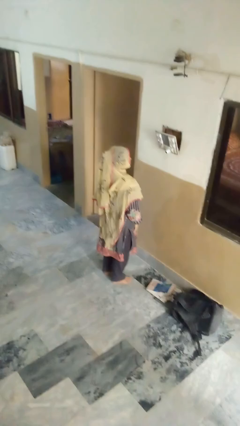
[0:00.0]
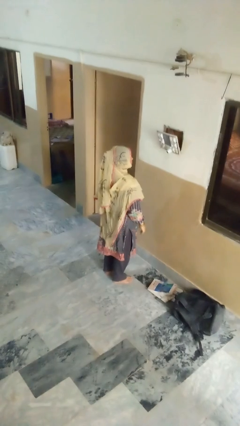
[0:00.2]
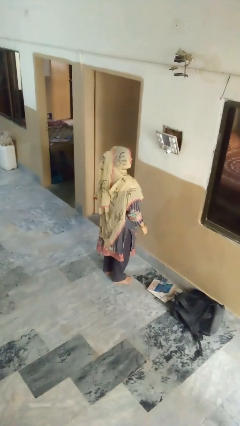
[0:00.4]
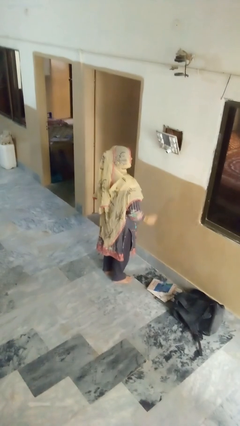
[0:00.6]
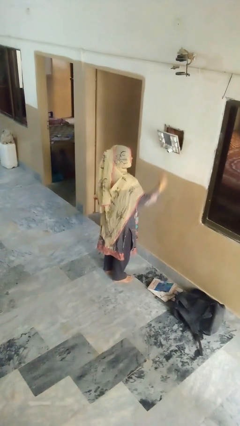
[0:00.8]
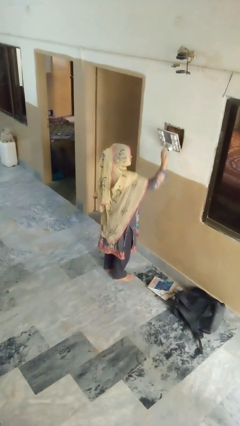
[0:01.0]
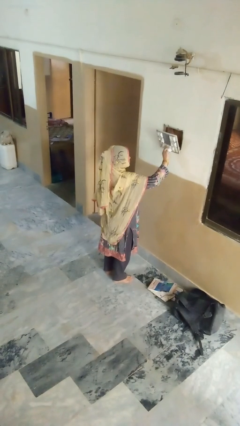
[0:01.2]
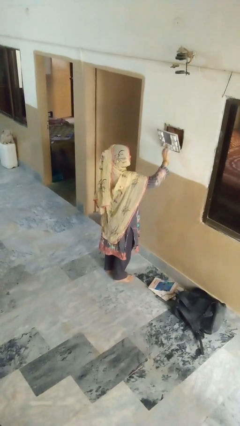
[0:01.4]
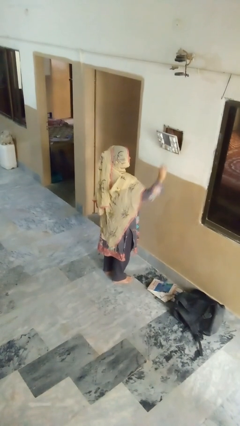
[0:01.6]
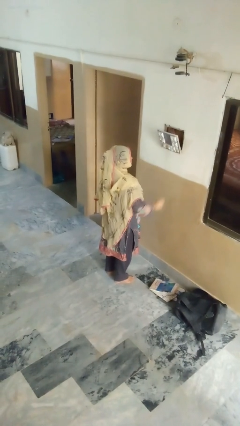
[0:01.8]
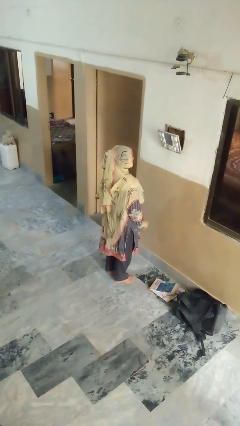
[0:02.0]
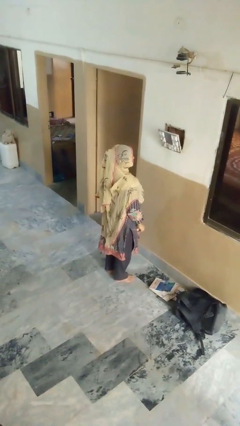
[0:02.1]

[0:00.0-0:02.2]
person unplugs from electrical socket

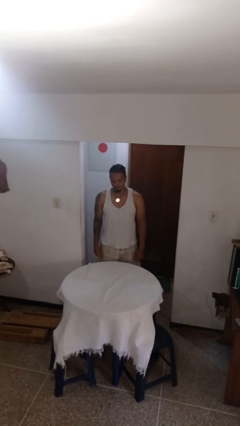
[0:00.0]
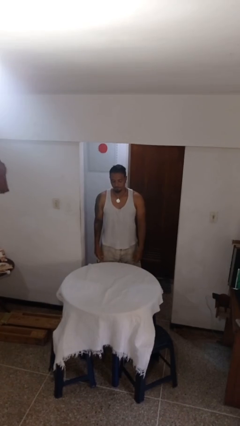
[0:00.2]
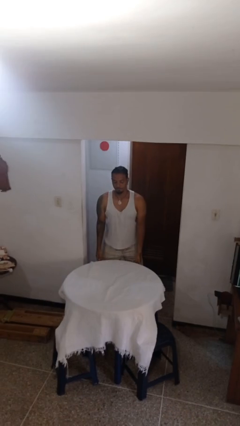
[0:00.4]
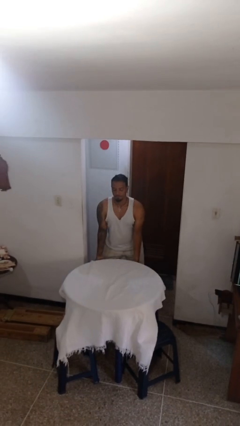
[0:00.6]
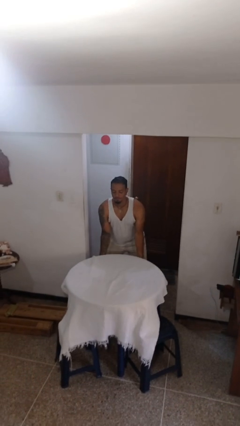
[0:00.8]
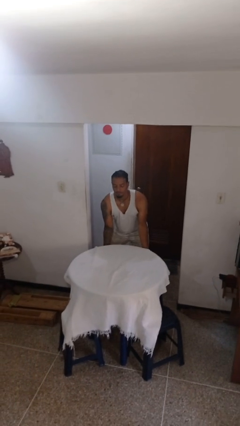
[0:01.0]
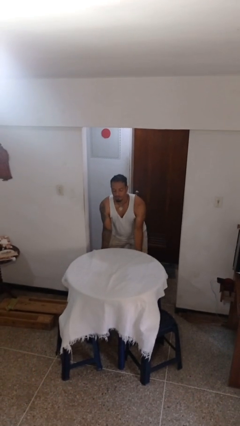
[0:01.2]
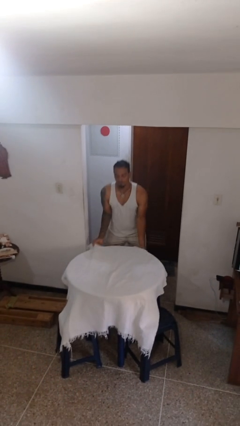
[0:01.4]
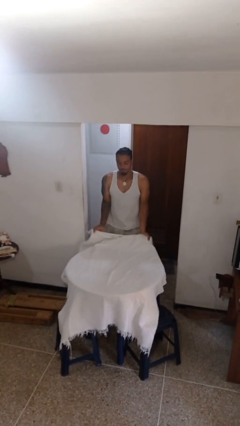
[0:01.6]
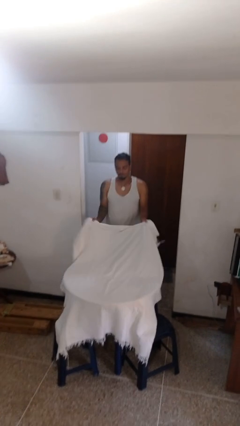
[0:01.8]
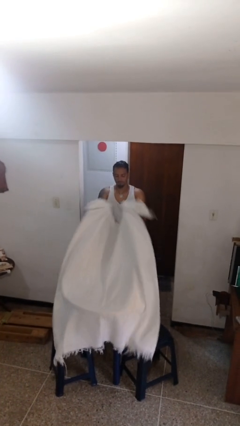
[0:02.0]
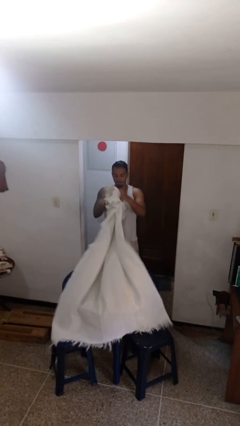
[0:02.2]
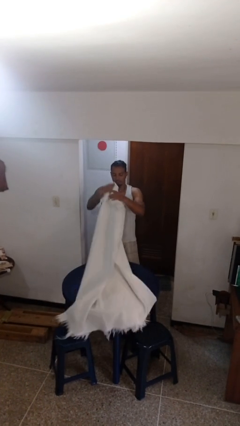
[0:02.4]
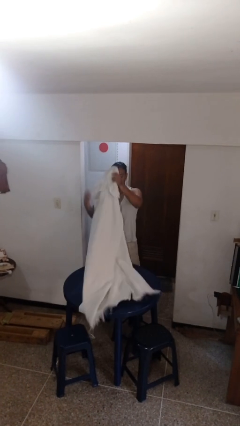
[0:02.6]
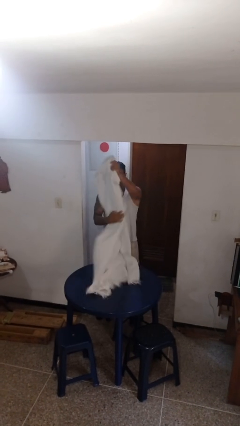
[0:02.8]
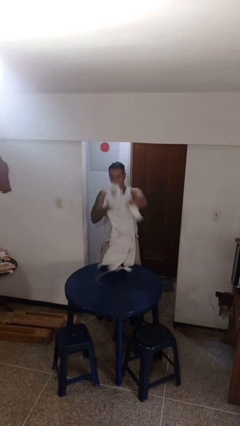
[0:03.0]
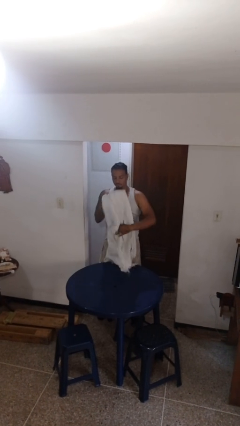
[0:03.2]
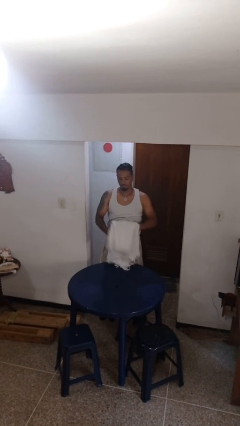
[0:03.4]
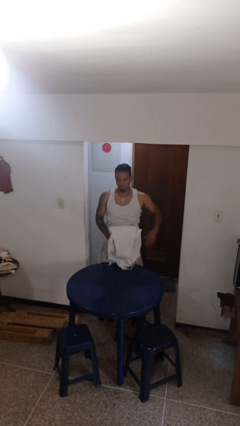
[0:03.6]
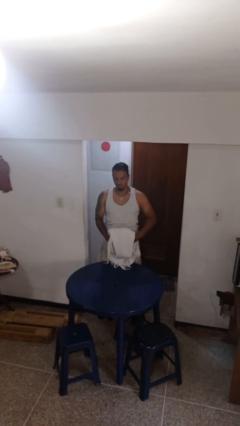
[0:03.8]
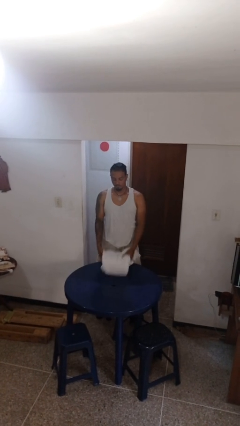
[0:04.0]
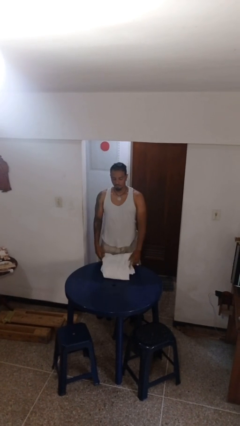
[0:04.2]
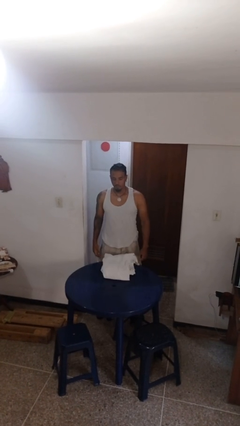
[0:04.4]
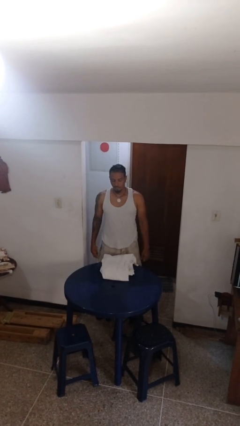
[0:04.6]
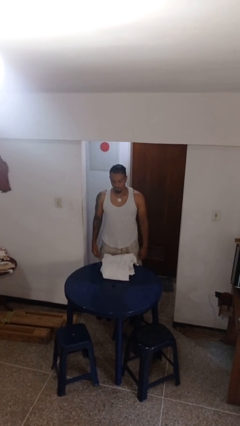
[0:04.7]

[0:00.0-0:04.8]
person folds tablecloth

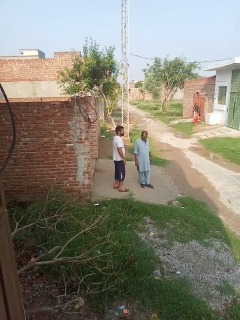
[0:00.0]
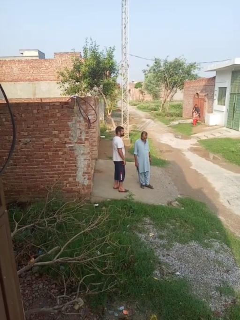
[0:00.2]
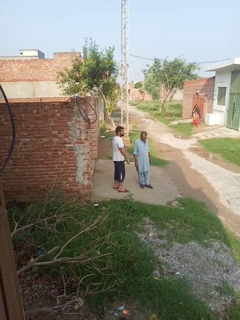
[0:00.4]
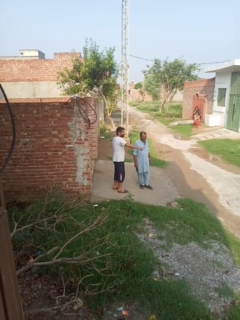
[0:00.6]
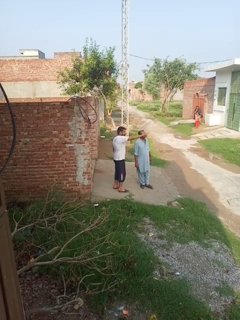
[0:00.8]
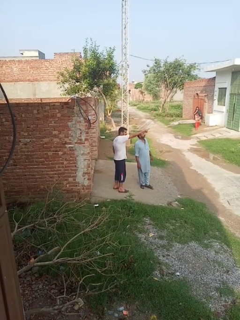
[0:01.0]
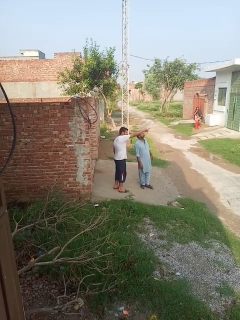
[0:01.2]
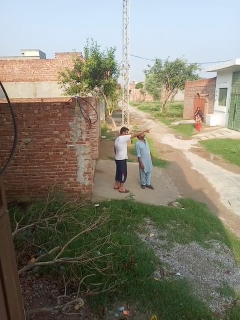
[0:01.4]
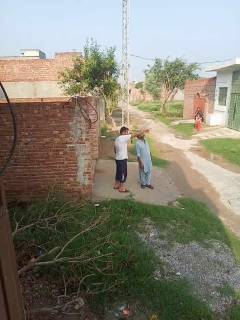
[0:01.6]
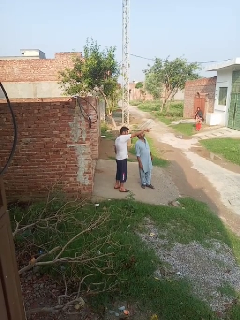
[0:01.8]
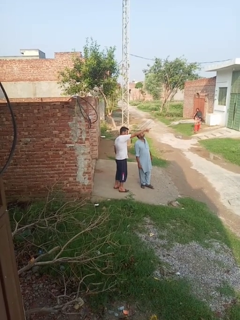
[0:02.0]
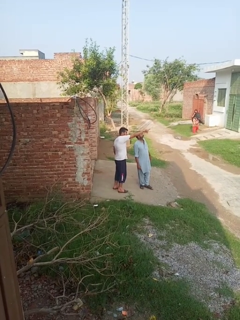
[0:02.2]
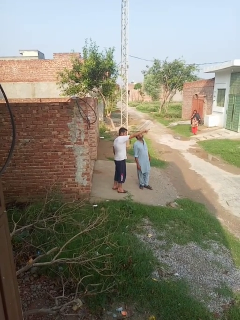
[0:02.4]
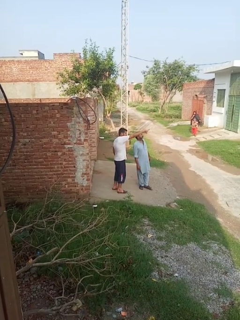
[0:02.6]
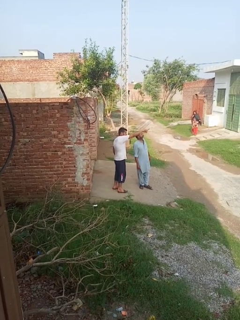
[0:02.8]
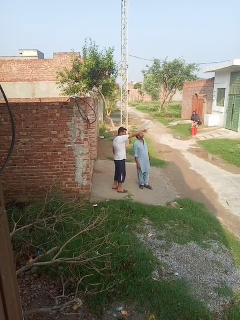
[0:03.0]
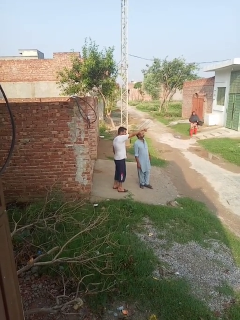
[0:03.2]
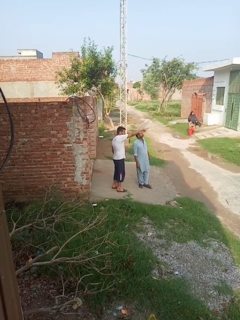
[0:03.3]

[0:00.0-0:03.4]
person points at person

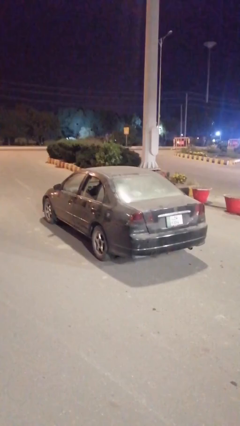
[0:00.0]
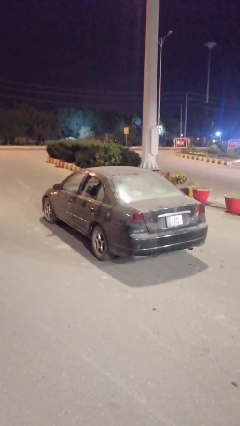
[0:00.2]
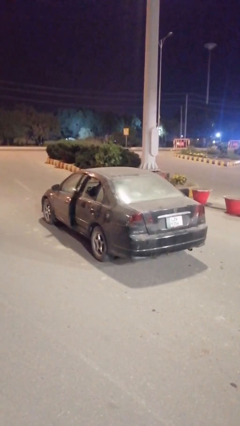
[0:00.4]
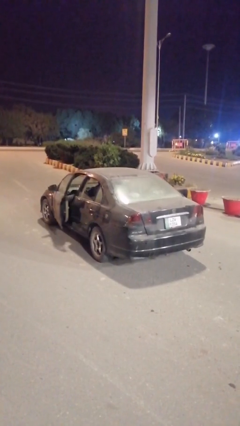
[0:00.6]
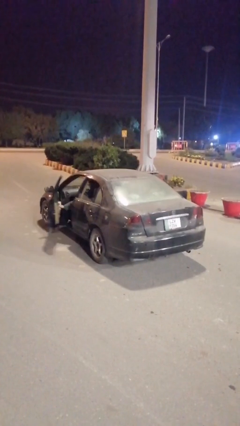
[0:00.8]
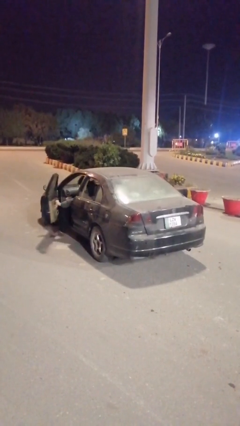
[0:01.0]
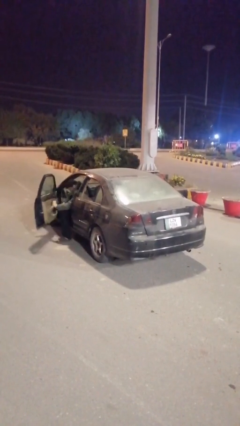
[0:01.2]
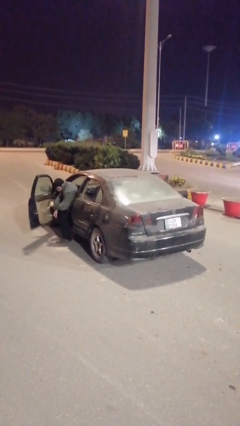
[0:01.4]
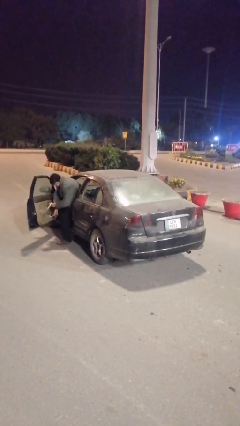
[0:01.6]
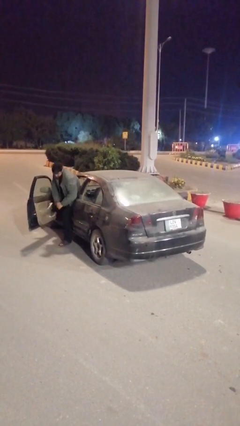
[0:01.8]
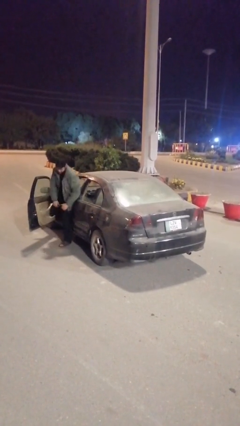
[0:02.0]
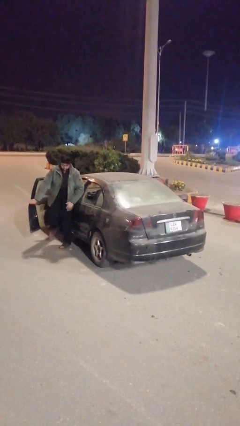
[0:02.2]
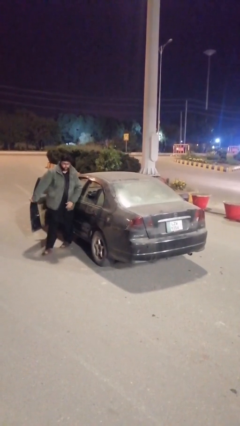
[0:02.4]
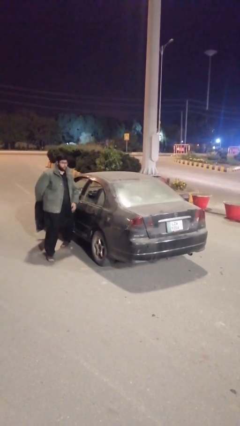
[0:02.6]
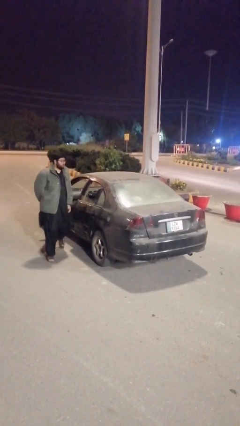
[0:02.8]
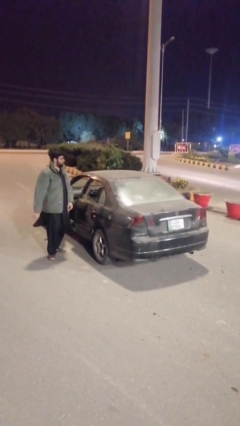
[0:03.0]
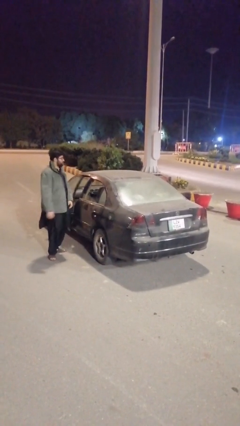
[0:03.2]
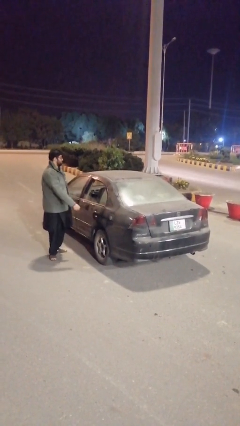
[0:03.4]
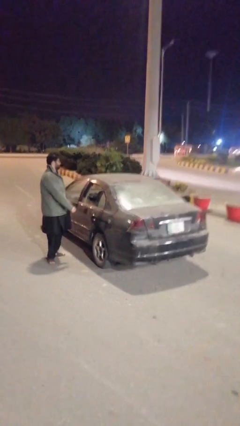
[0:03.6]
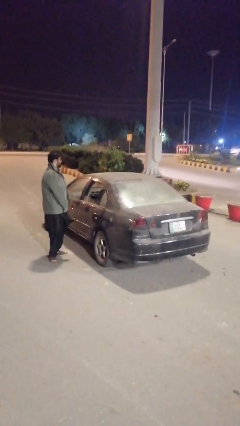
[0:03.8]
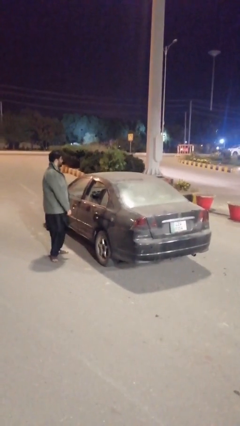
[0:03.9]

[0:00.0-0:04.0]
car drops off person

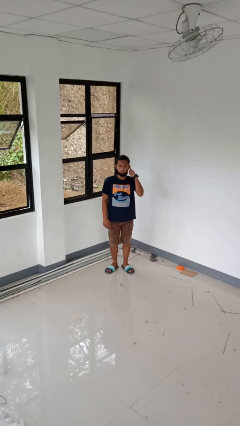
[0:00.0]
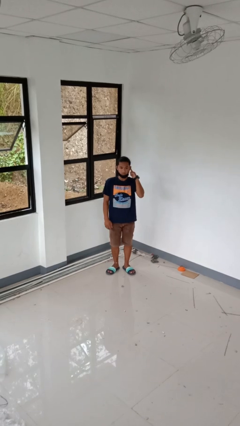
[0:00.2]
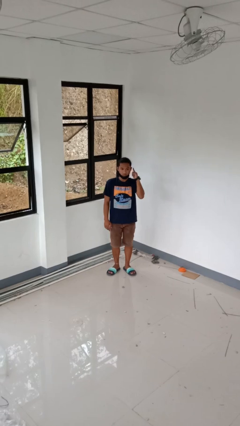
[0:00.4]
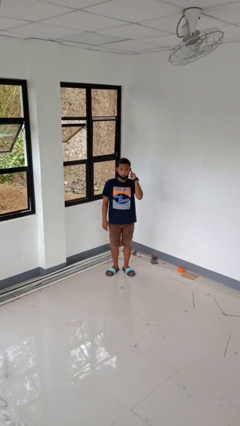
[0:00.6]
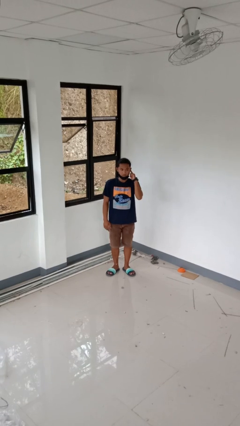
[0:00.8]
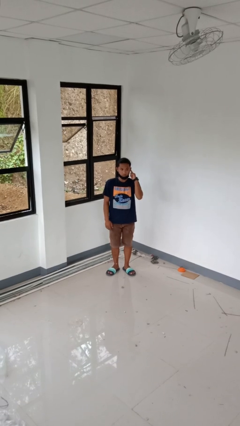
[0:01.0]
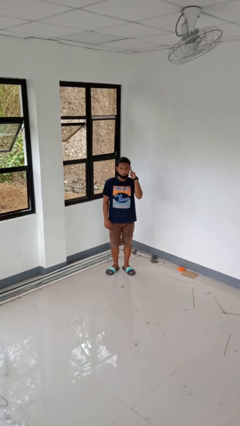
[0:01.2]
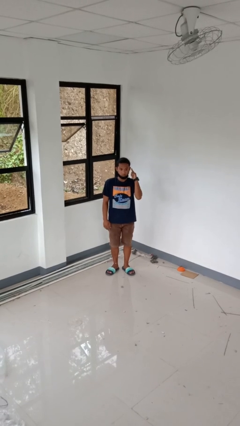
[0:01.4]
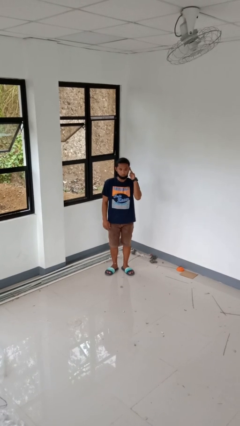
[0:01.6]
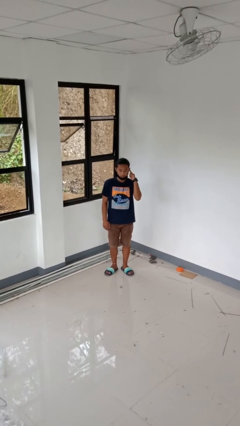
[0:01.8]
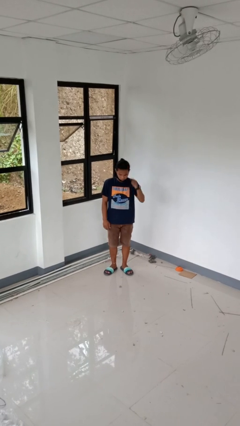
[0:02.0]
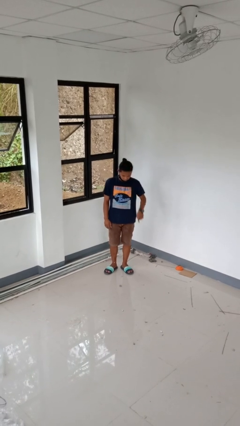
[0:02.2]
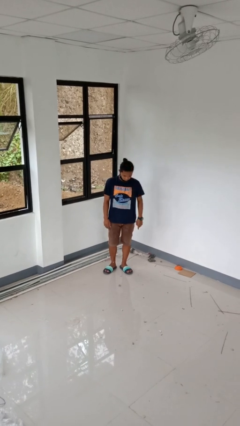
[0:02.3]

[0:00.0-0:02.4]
person gestures listen closely

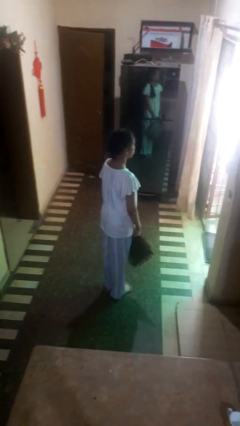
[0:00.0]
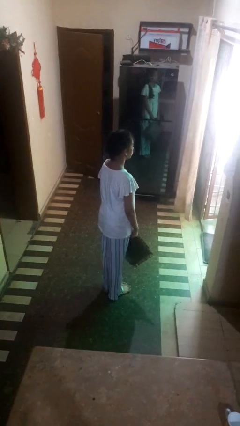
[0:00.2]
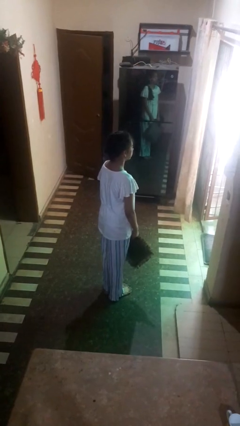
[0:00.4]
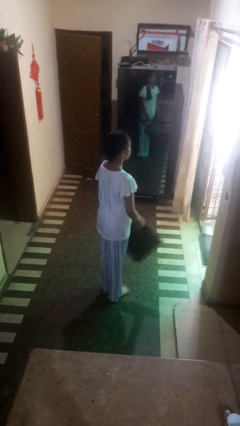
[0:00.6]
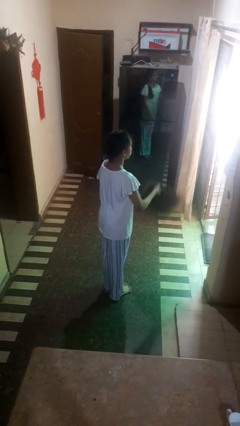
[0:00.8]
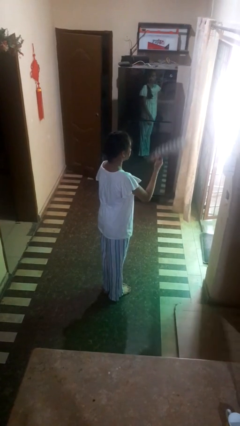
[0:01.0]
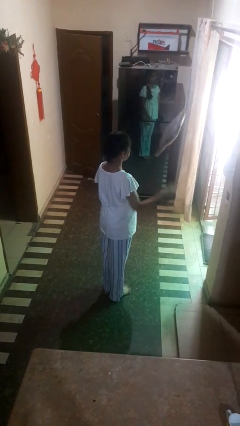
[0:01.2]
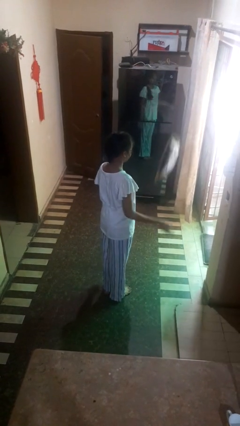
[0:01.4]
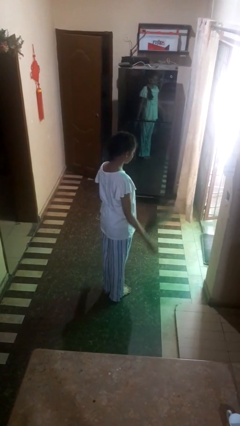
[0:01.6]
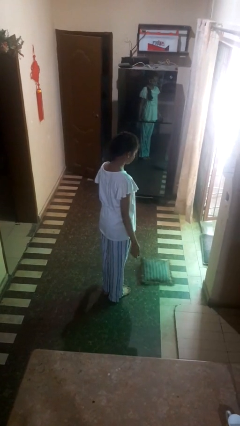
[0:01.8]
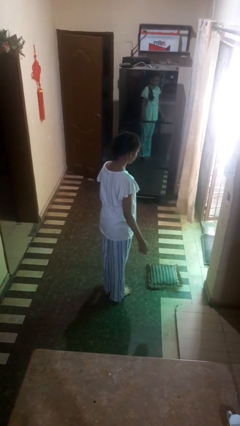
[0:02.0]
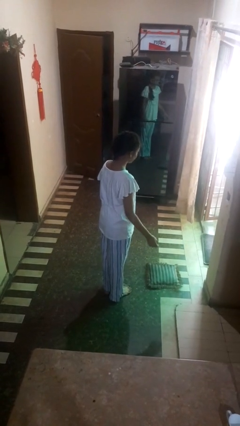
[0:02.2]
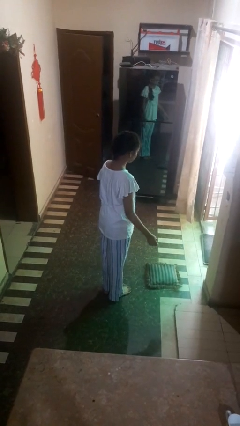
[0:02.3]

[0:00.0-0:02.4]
person throws object into air
